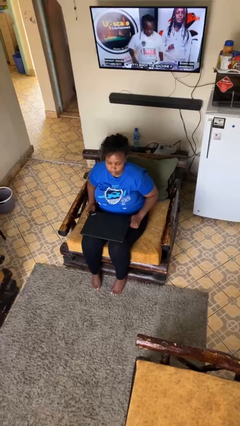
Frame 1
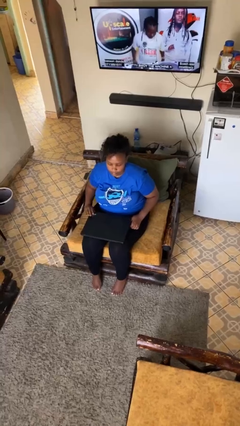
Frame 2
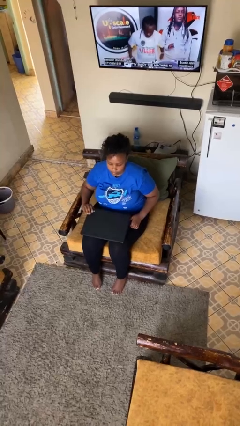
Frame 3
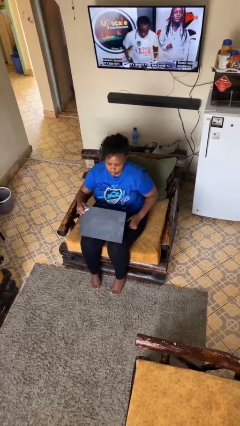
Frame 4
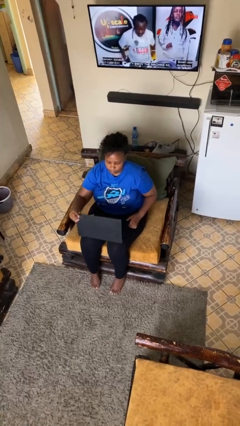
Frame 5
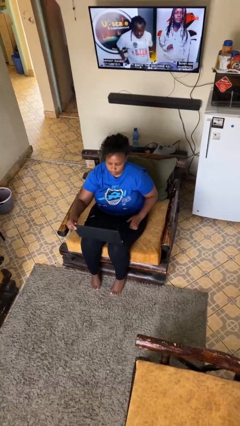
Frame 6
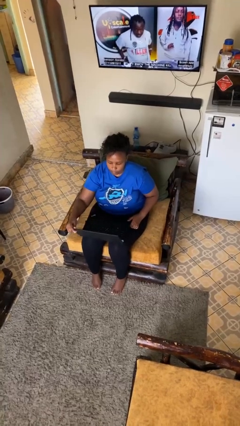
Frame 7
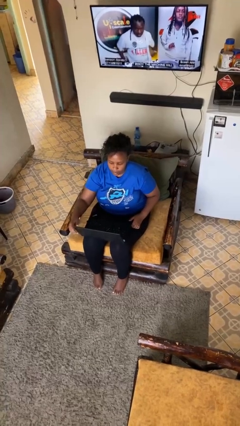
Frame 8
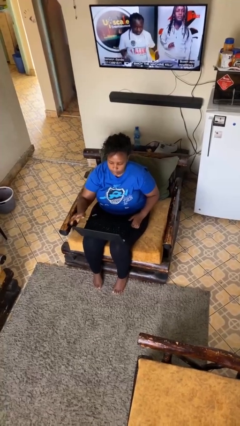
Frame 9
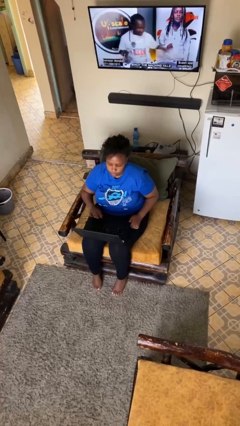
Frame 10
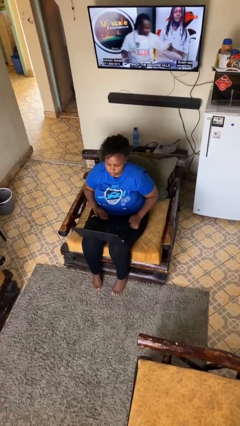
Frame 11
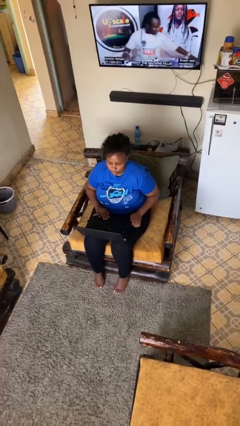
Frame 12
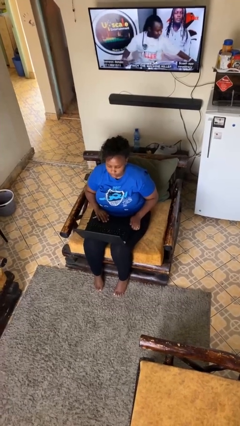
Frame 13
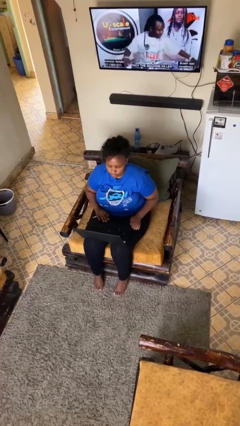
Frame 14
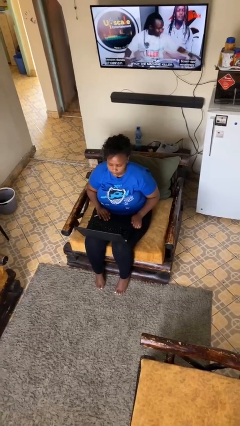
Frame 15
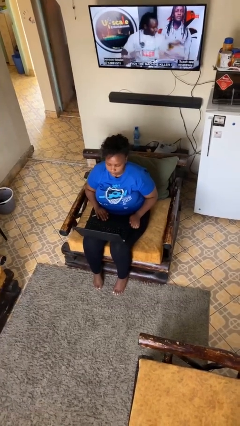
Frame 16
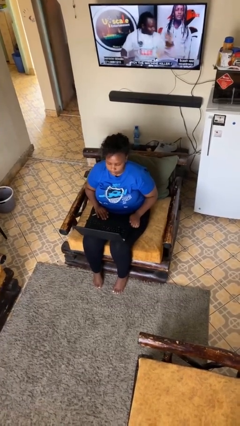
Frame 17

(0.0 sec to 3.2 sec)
person opens laptop

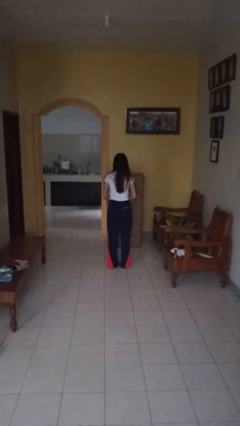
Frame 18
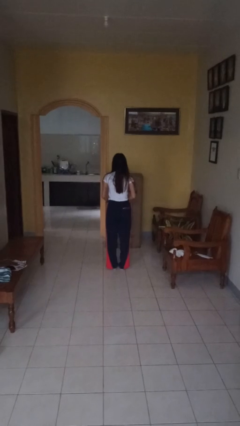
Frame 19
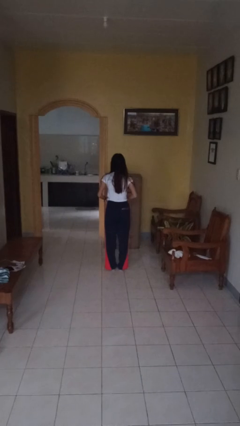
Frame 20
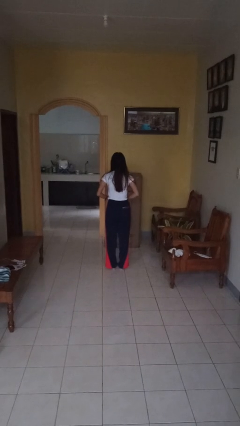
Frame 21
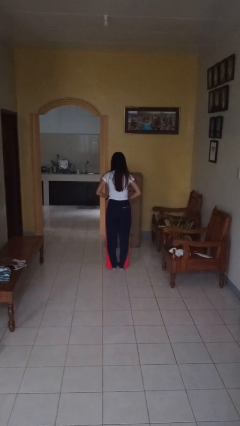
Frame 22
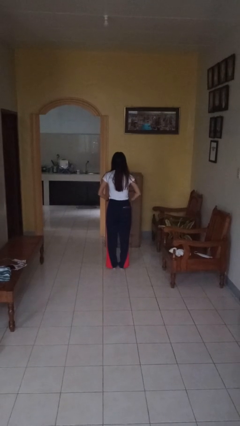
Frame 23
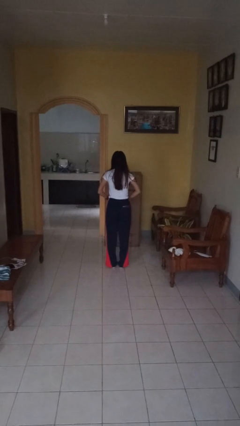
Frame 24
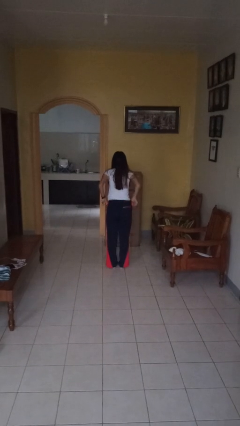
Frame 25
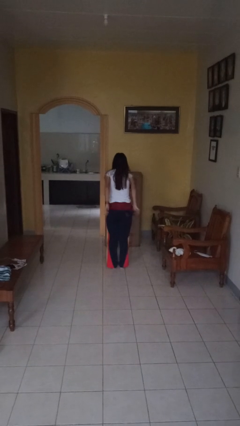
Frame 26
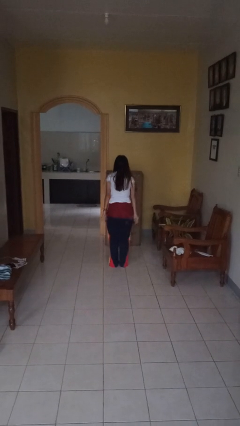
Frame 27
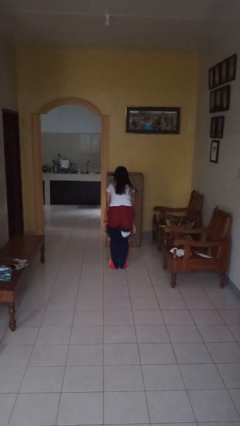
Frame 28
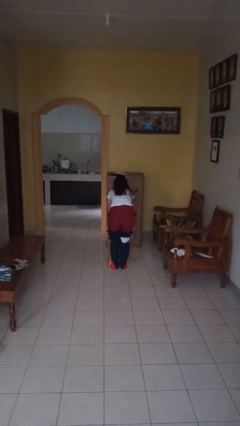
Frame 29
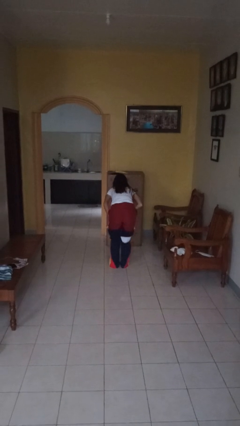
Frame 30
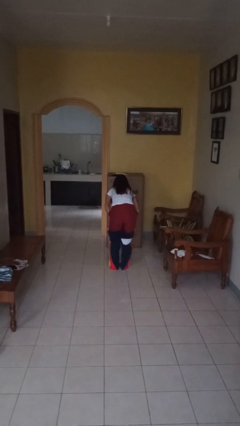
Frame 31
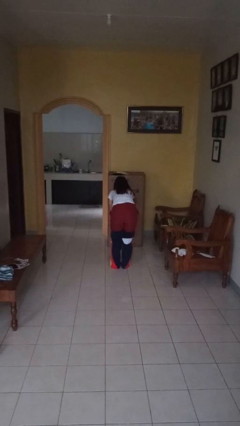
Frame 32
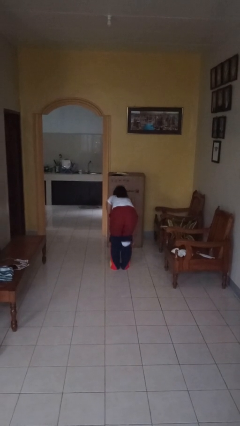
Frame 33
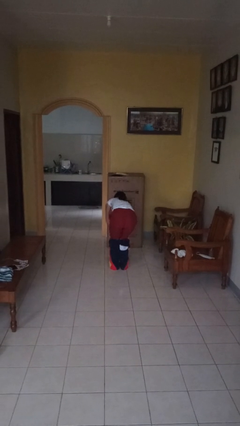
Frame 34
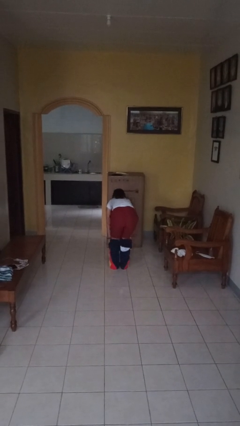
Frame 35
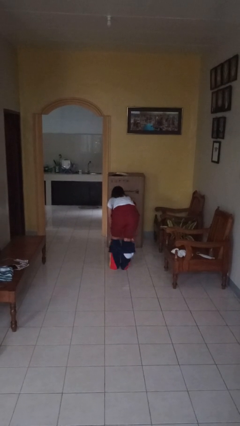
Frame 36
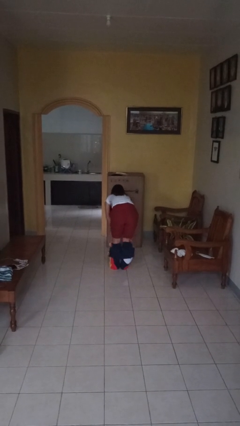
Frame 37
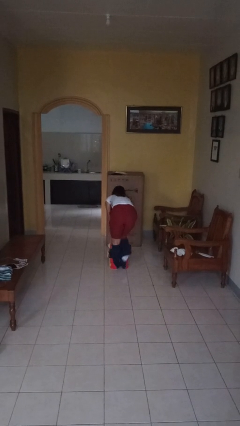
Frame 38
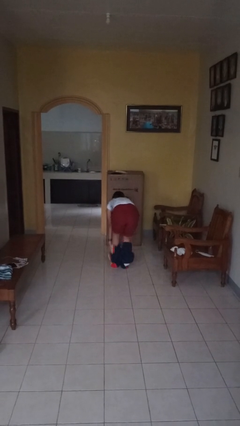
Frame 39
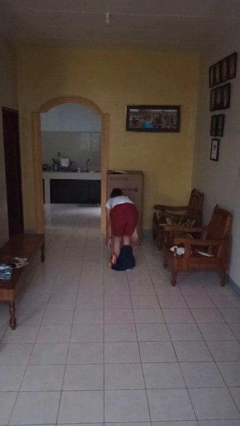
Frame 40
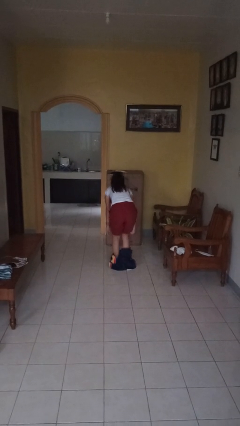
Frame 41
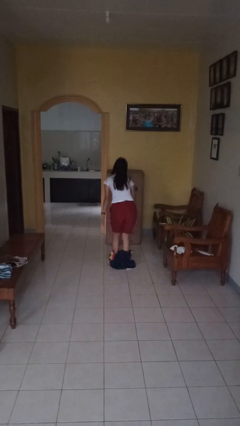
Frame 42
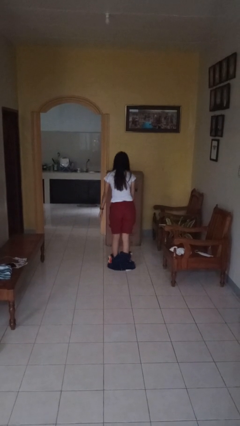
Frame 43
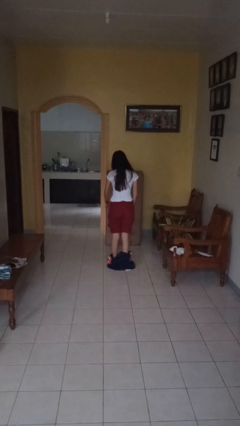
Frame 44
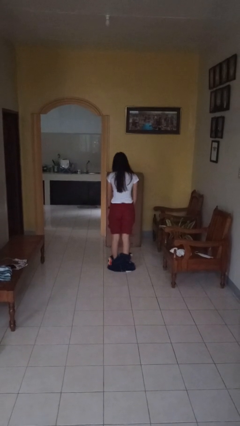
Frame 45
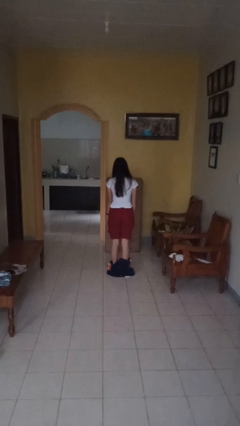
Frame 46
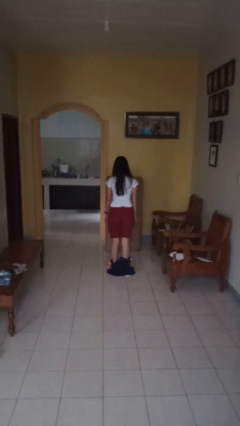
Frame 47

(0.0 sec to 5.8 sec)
person takes off pants

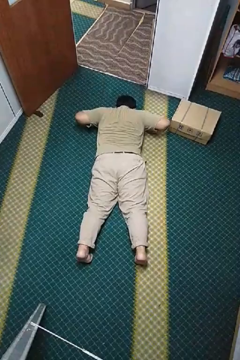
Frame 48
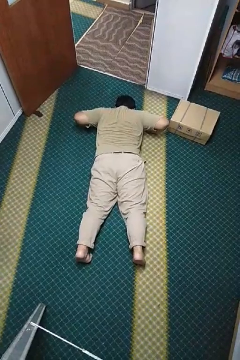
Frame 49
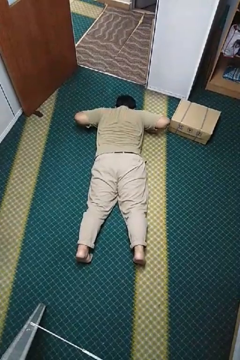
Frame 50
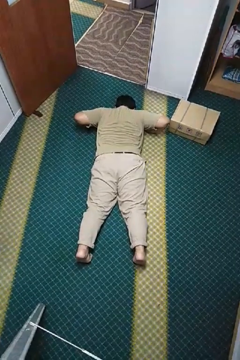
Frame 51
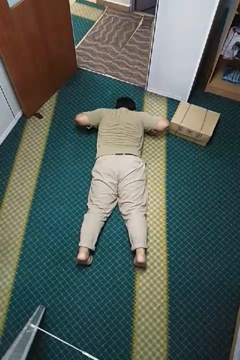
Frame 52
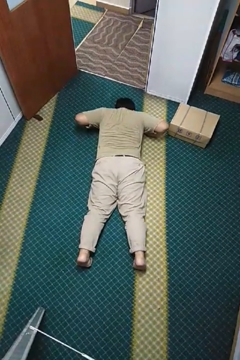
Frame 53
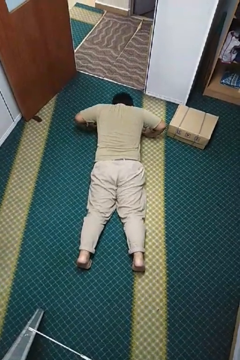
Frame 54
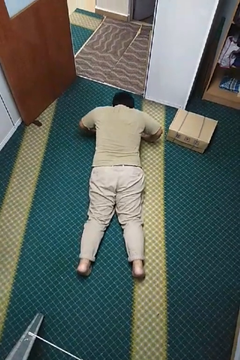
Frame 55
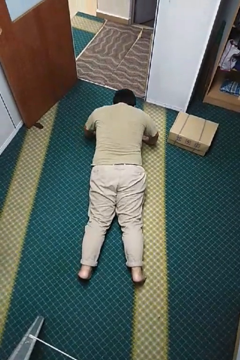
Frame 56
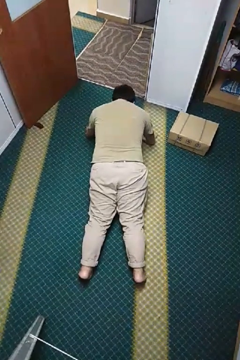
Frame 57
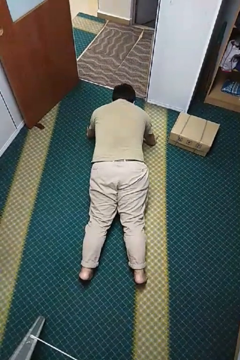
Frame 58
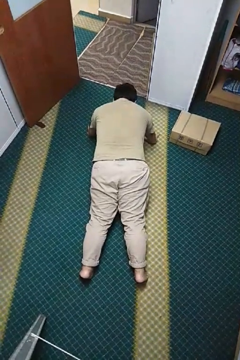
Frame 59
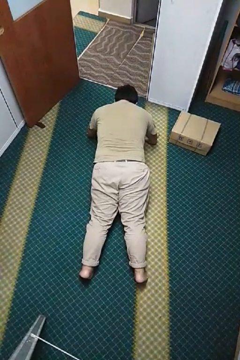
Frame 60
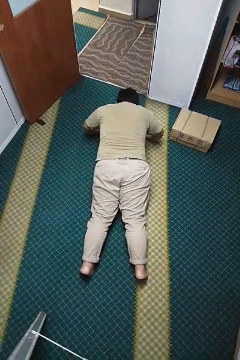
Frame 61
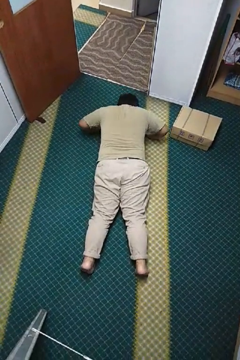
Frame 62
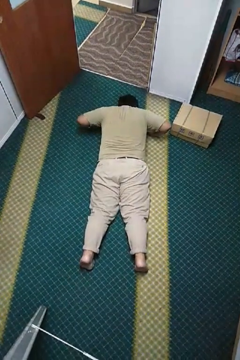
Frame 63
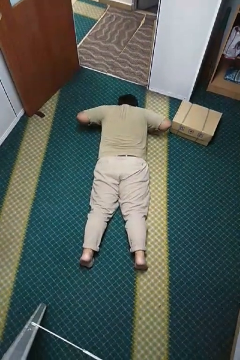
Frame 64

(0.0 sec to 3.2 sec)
person exercises with pushup

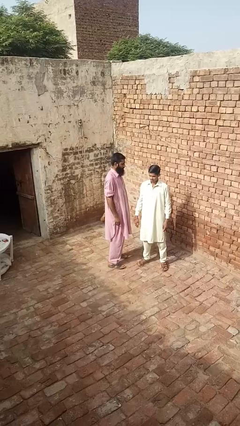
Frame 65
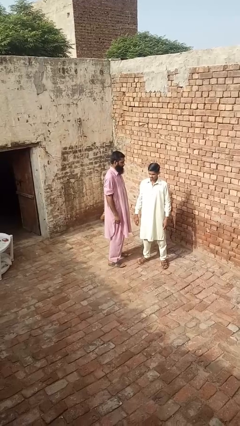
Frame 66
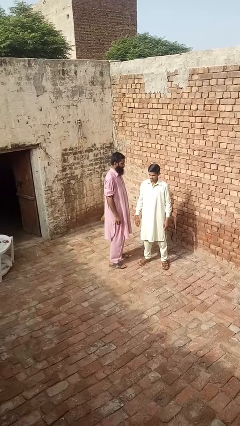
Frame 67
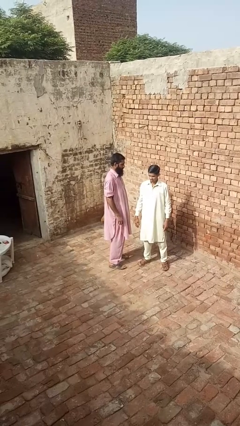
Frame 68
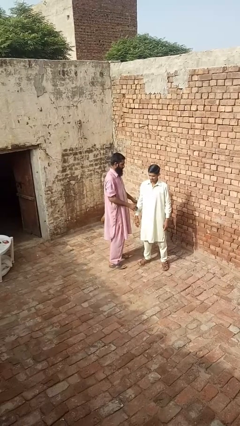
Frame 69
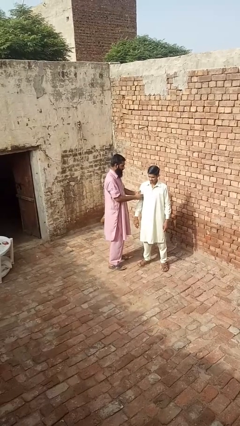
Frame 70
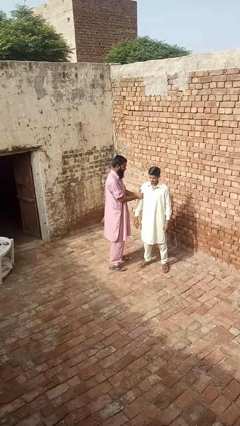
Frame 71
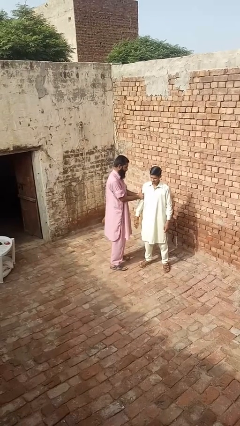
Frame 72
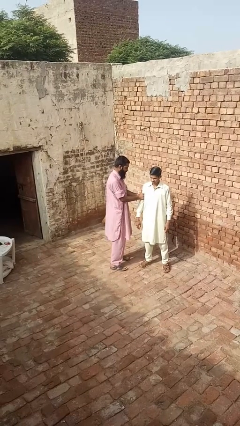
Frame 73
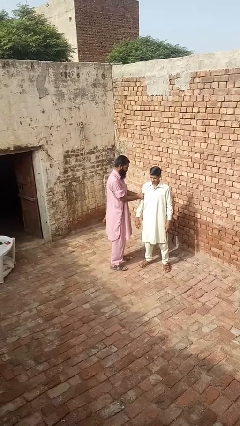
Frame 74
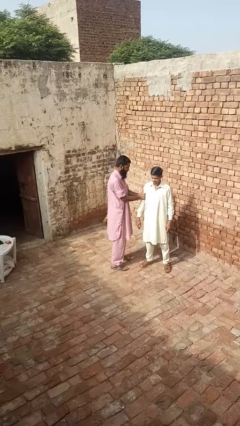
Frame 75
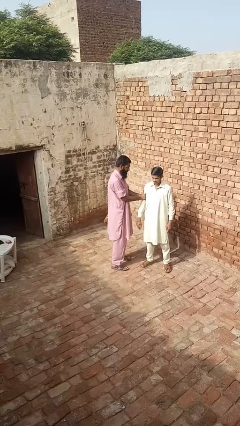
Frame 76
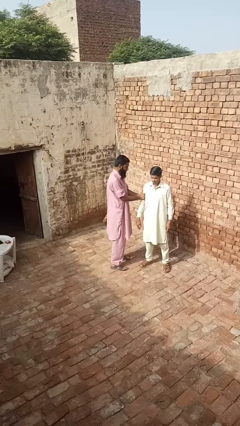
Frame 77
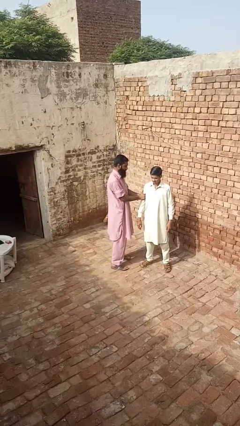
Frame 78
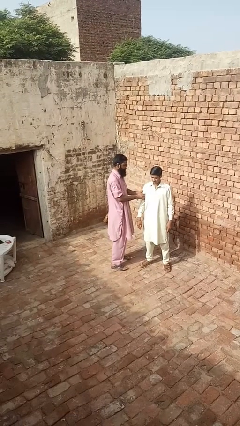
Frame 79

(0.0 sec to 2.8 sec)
person grabs person by bicep

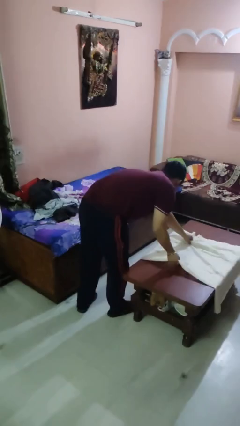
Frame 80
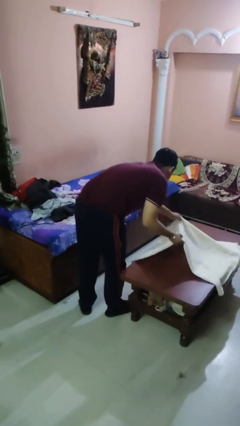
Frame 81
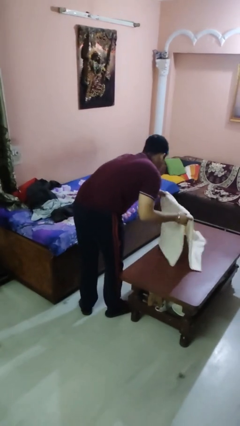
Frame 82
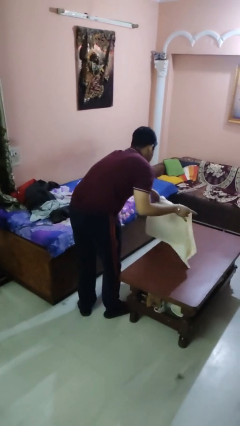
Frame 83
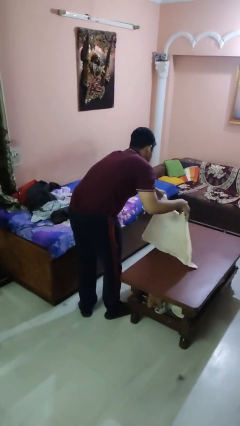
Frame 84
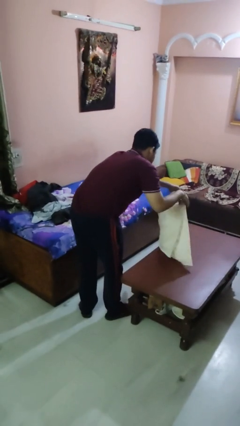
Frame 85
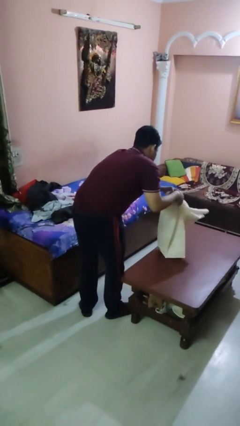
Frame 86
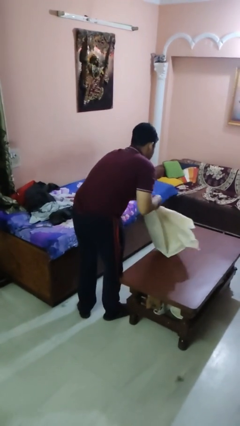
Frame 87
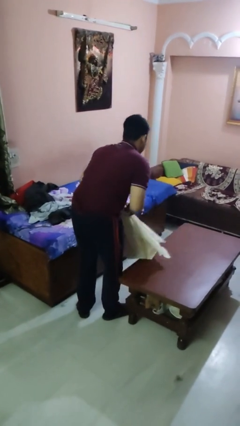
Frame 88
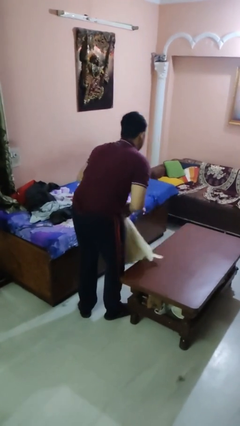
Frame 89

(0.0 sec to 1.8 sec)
person folds tablecloth

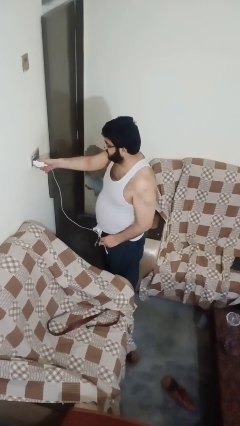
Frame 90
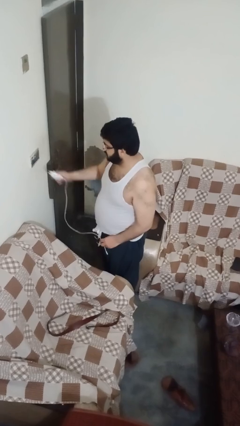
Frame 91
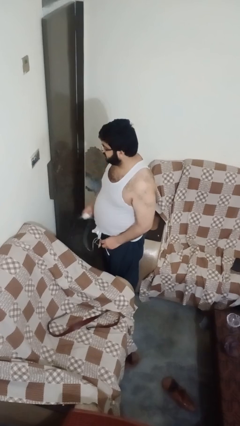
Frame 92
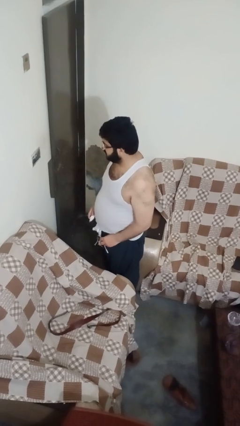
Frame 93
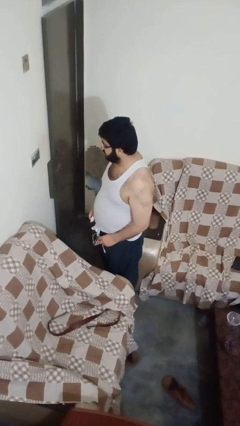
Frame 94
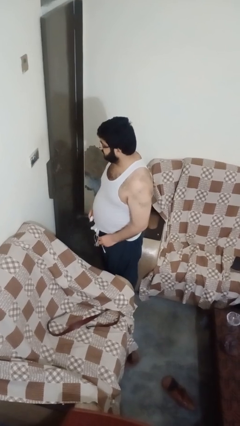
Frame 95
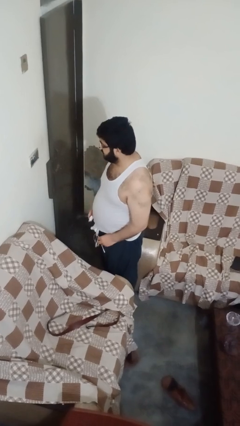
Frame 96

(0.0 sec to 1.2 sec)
person unplugs from electrical socket
